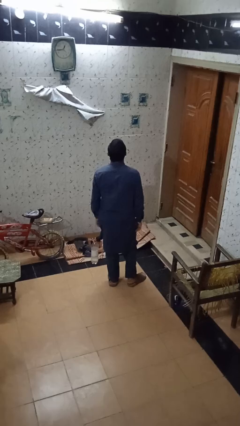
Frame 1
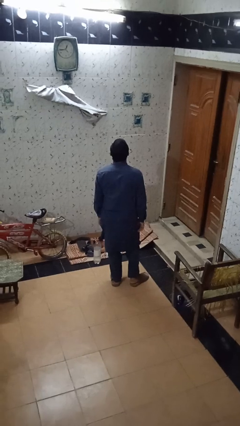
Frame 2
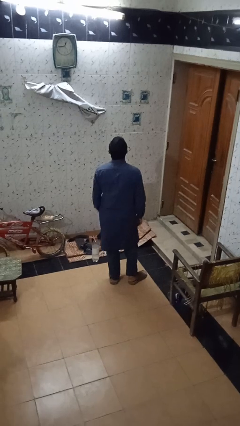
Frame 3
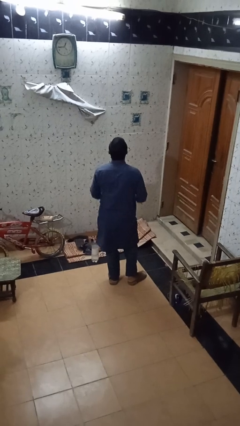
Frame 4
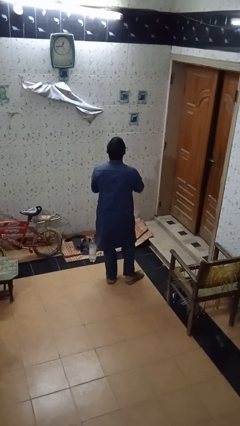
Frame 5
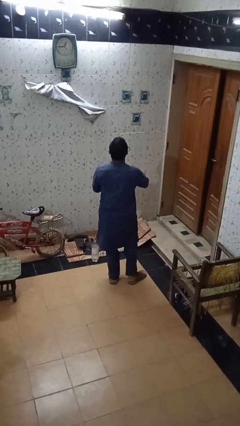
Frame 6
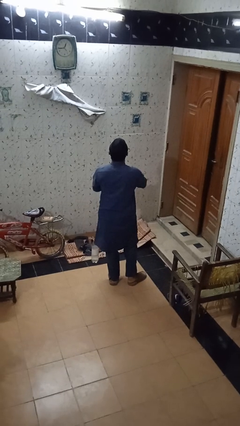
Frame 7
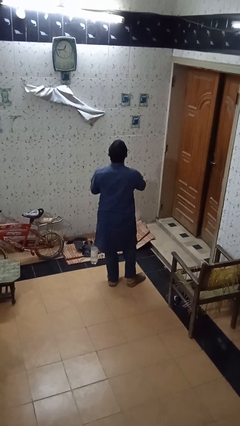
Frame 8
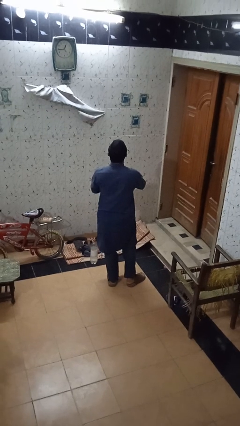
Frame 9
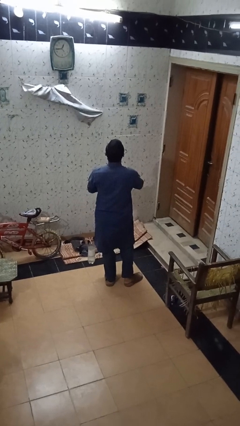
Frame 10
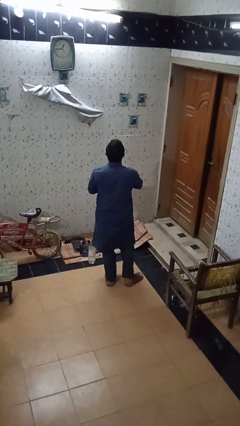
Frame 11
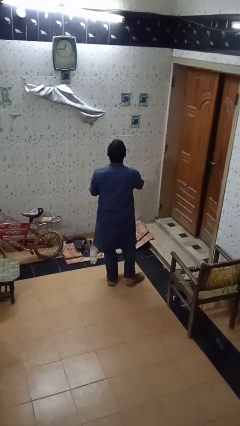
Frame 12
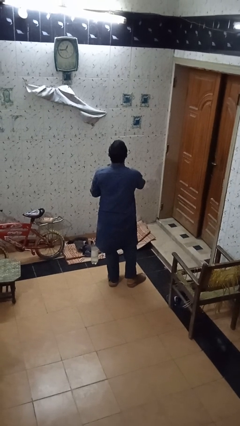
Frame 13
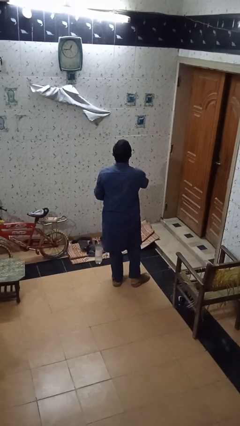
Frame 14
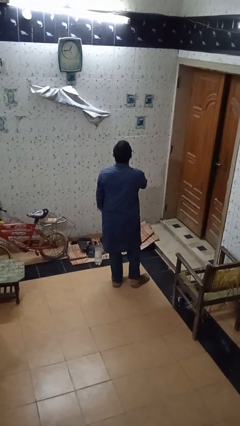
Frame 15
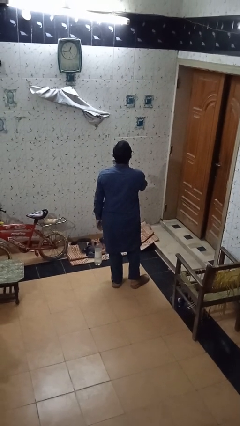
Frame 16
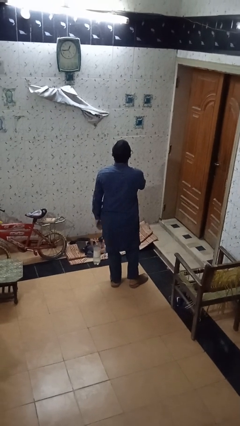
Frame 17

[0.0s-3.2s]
person drums on chest

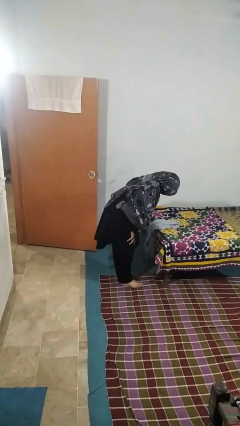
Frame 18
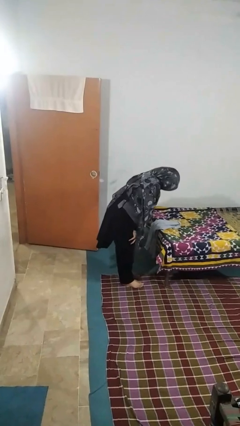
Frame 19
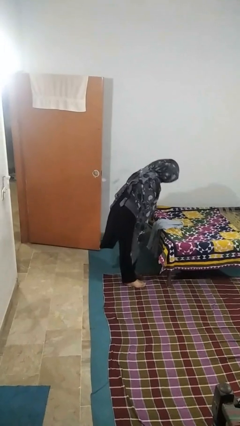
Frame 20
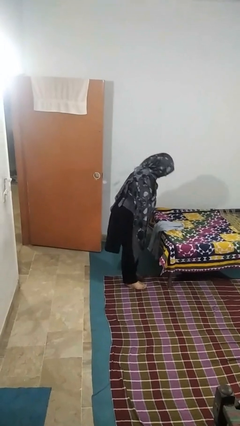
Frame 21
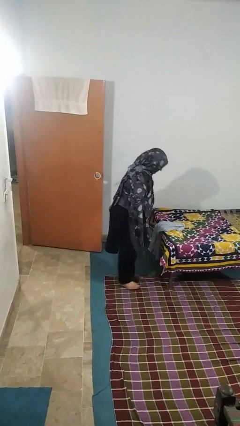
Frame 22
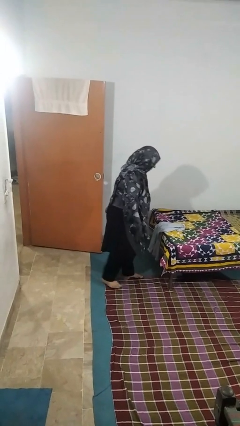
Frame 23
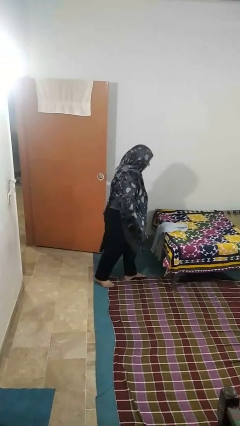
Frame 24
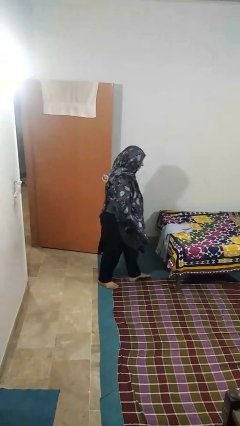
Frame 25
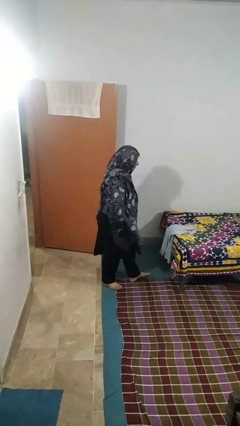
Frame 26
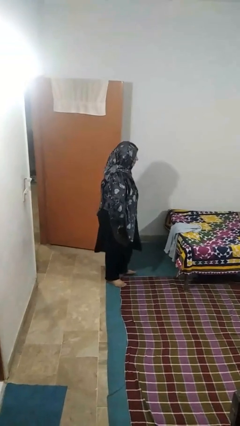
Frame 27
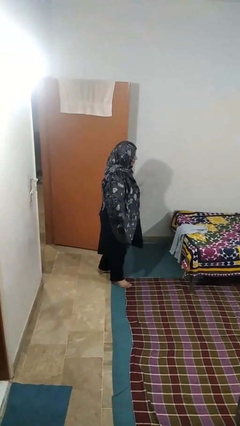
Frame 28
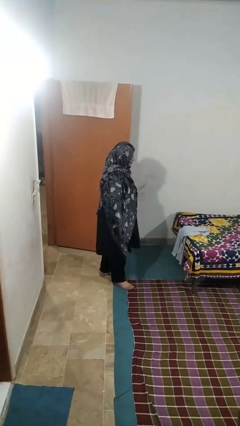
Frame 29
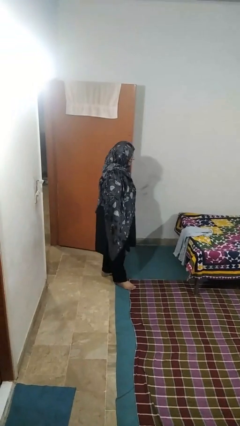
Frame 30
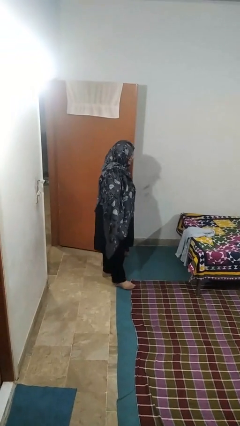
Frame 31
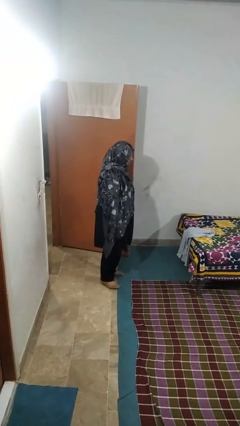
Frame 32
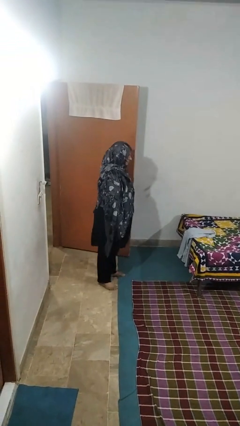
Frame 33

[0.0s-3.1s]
person stubs toe

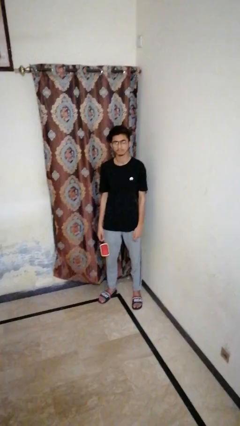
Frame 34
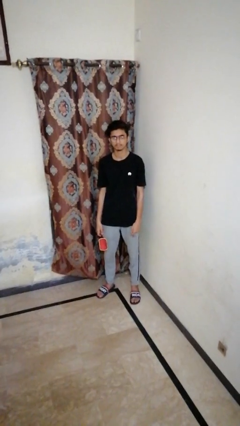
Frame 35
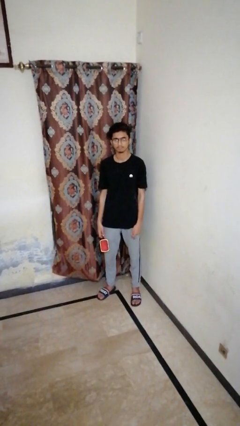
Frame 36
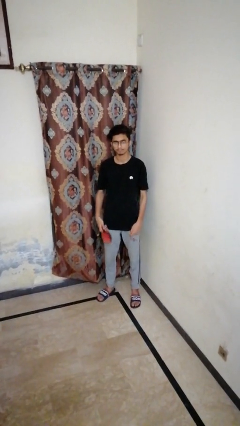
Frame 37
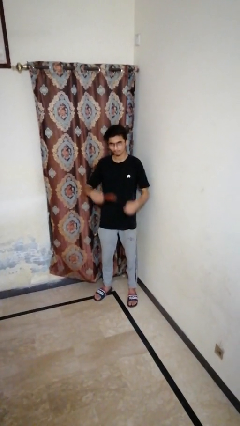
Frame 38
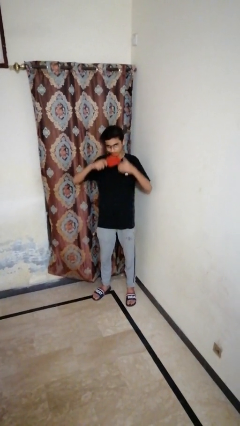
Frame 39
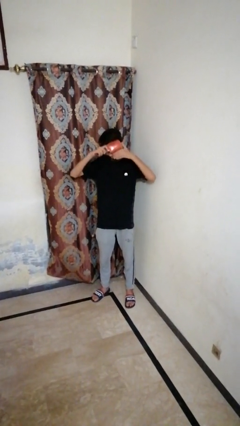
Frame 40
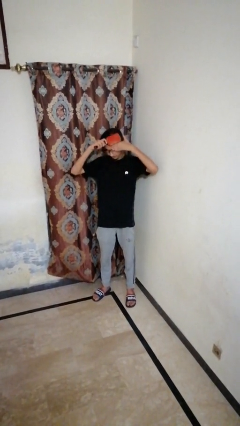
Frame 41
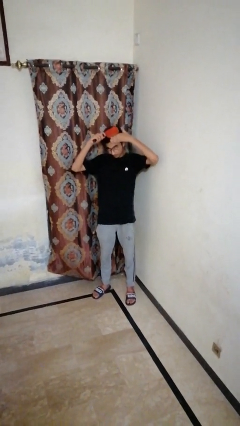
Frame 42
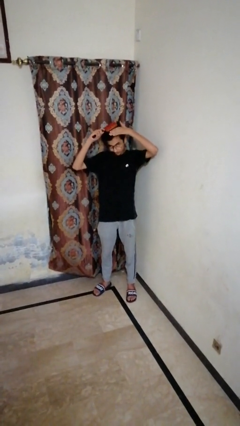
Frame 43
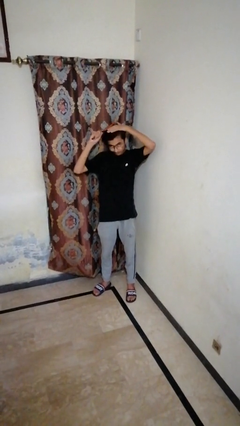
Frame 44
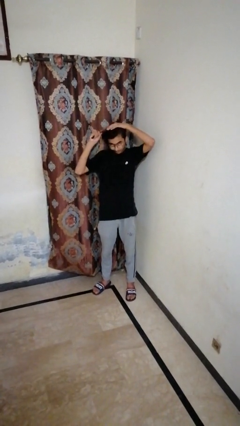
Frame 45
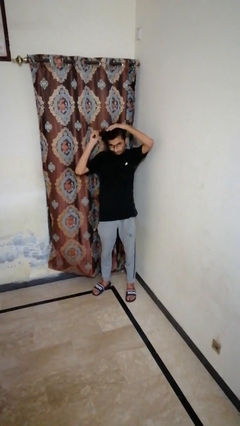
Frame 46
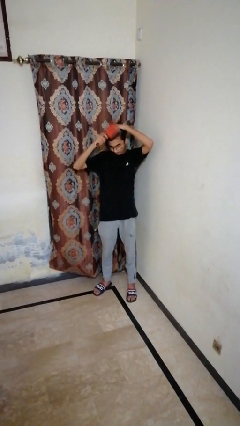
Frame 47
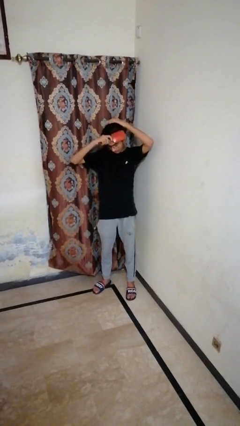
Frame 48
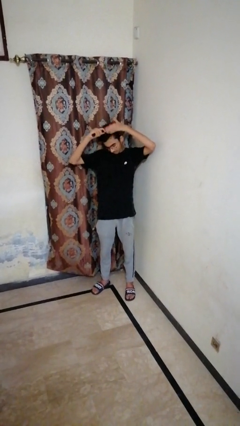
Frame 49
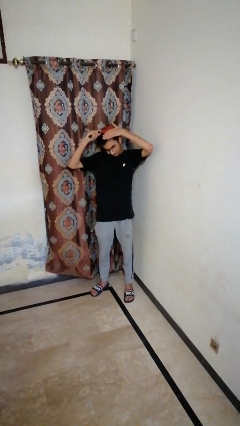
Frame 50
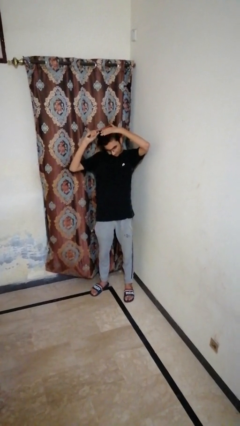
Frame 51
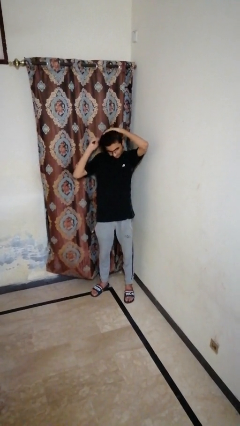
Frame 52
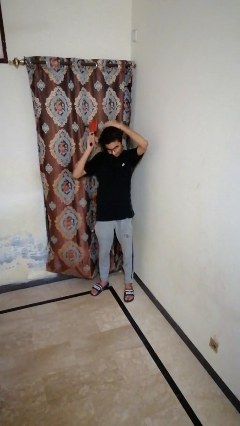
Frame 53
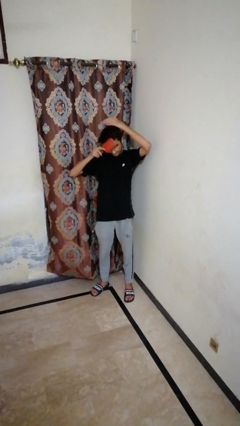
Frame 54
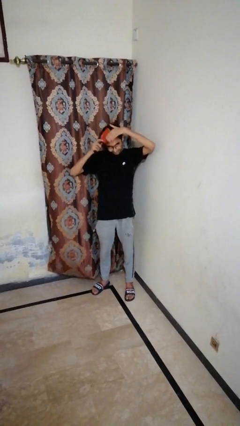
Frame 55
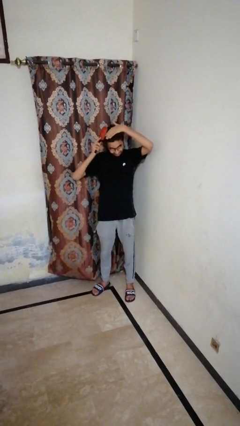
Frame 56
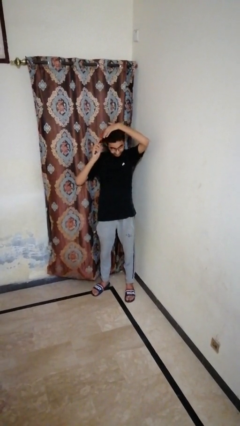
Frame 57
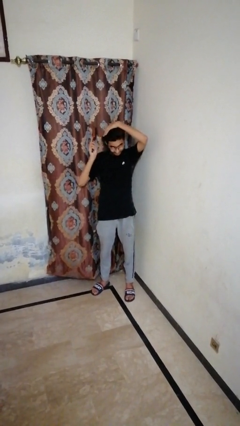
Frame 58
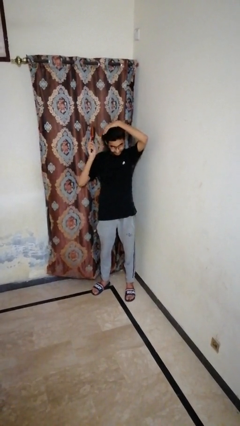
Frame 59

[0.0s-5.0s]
person brushes hair

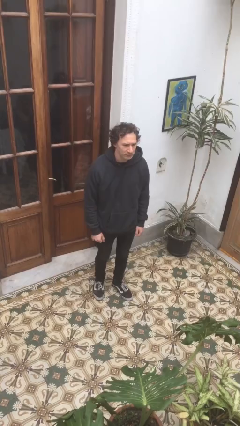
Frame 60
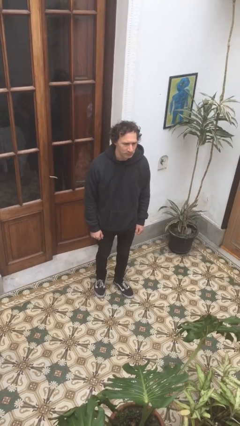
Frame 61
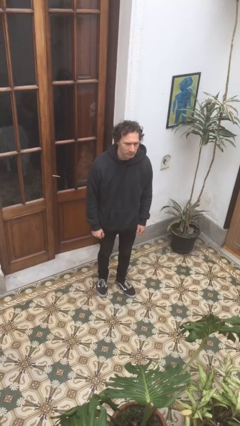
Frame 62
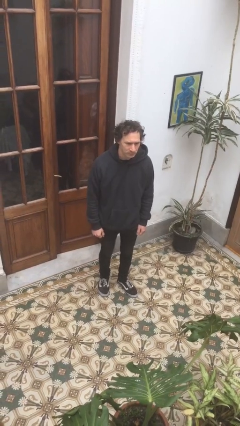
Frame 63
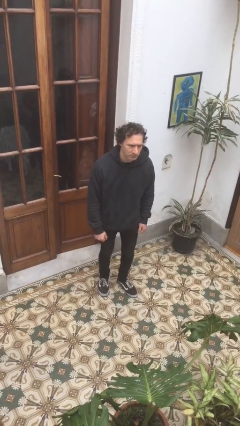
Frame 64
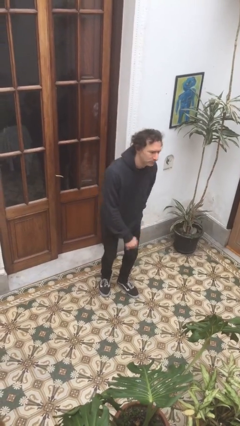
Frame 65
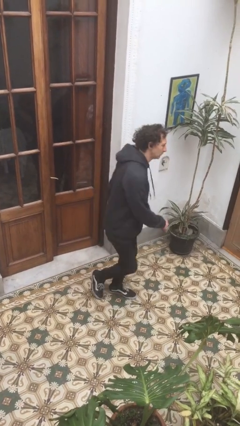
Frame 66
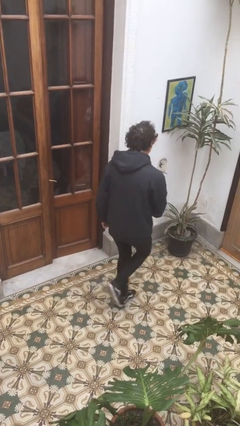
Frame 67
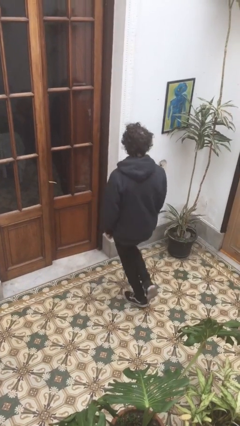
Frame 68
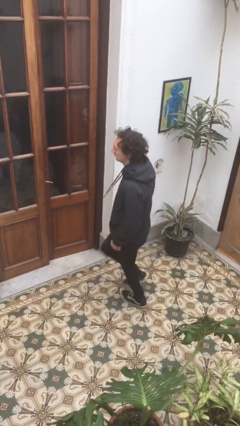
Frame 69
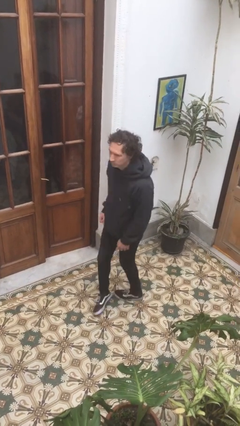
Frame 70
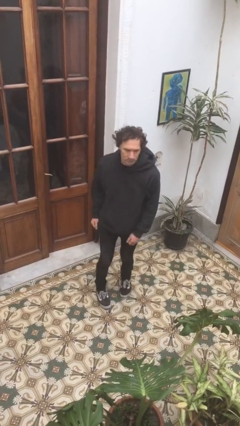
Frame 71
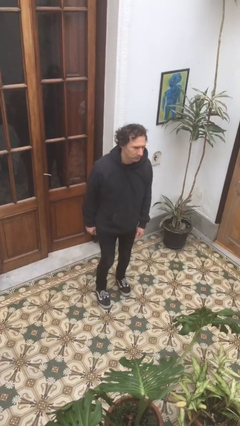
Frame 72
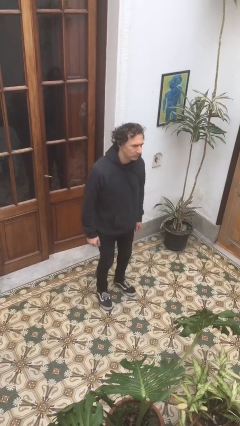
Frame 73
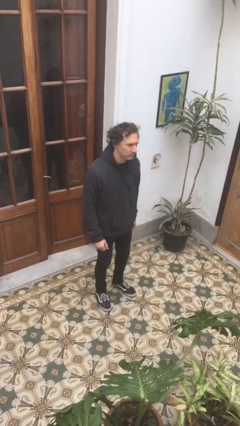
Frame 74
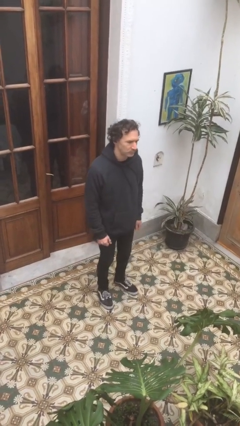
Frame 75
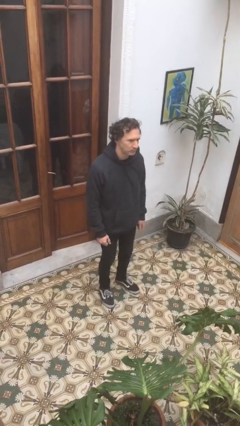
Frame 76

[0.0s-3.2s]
person twirls

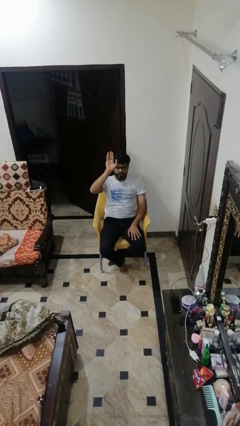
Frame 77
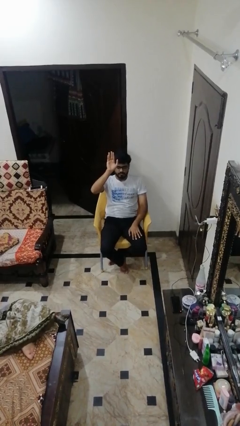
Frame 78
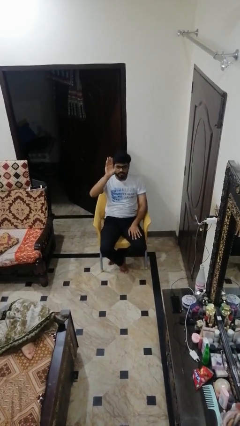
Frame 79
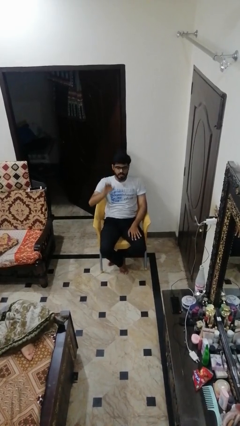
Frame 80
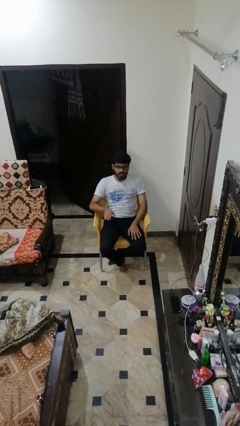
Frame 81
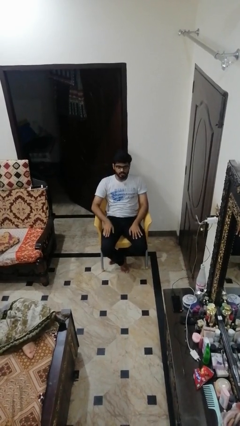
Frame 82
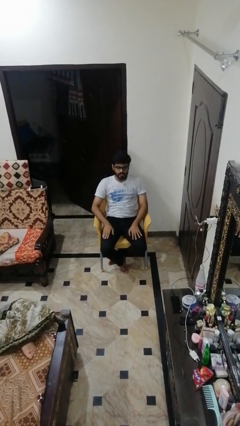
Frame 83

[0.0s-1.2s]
person gestures lower hand

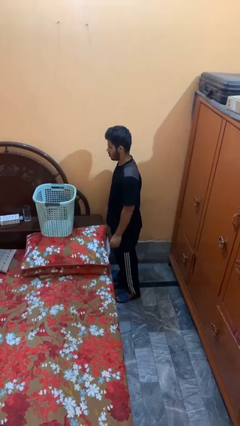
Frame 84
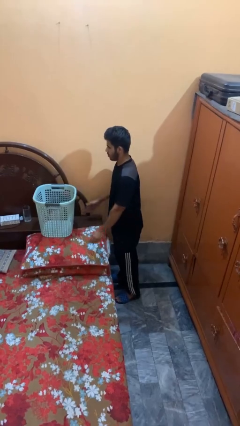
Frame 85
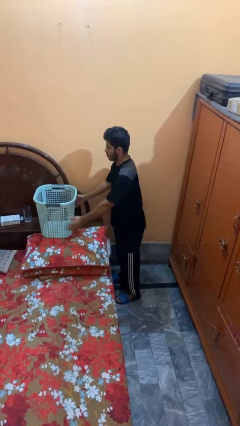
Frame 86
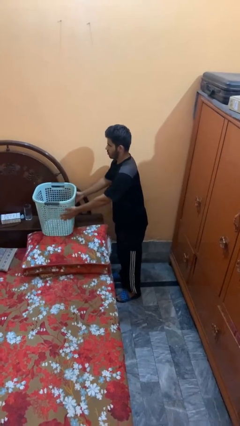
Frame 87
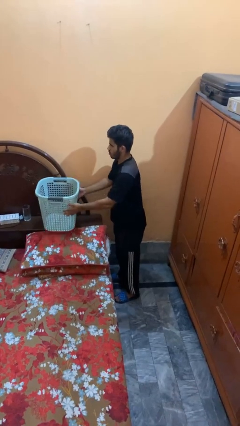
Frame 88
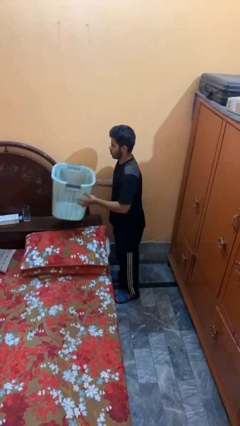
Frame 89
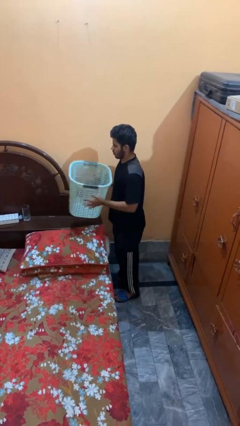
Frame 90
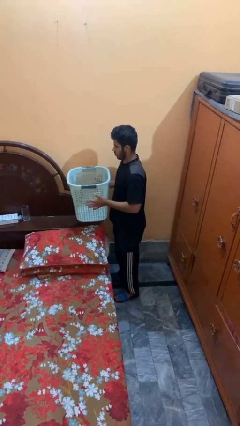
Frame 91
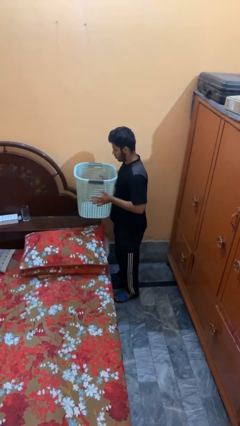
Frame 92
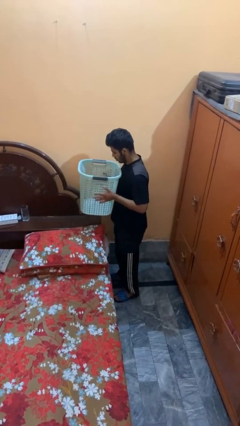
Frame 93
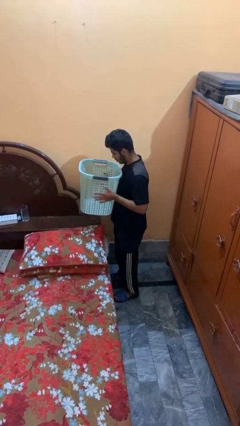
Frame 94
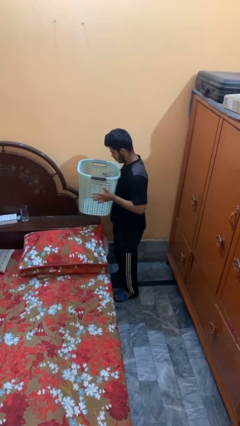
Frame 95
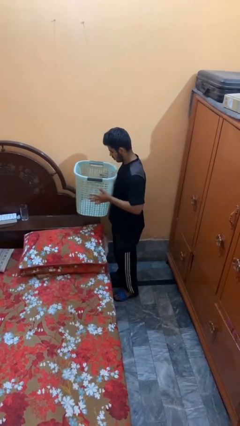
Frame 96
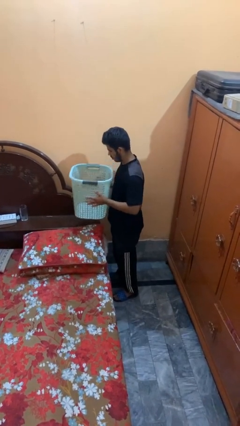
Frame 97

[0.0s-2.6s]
person picks up object from bed
